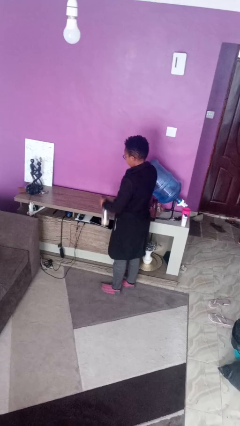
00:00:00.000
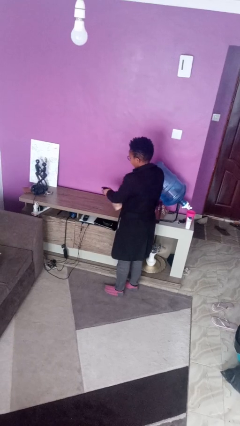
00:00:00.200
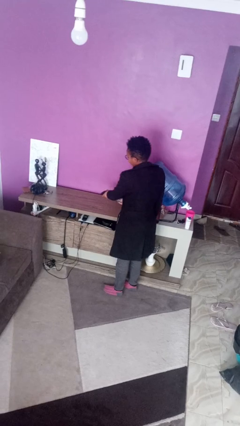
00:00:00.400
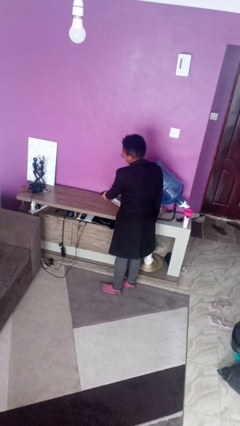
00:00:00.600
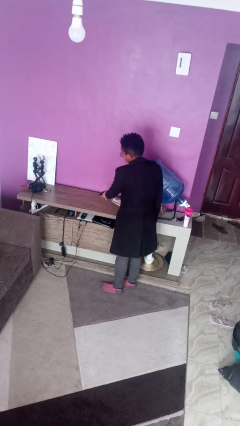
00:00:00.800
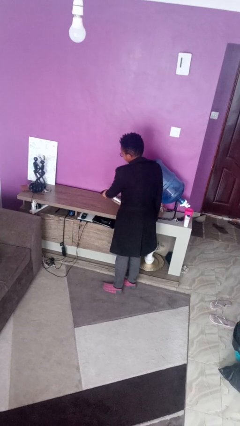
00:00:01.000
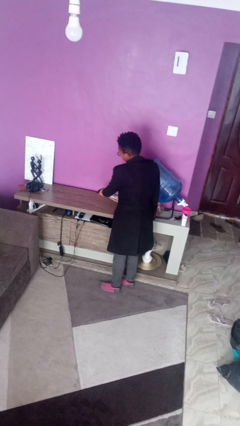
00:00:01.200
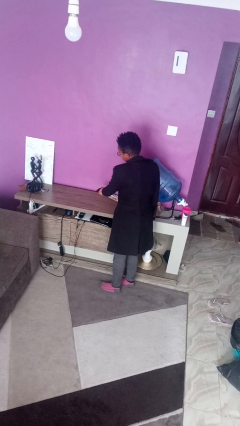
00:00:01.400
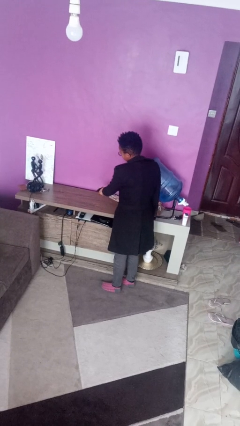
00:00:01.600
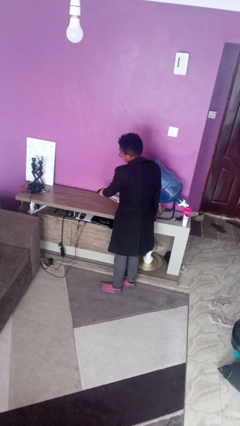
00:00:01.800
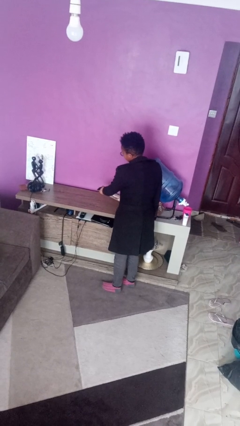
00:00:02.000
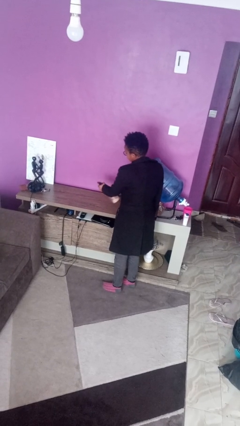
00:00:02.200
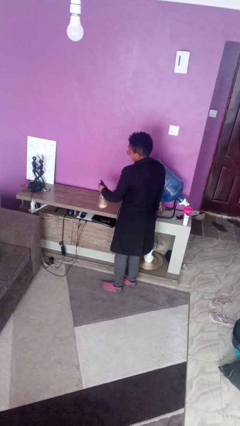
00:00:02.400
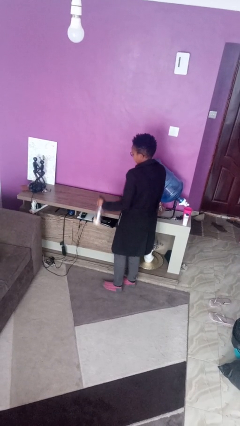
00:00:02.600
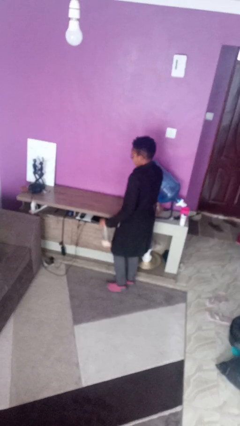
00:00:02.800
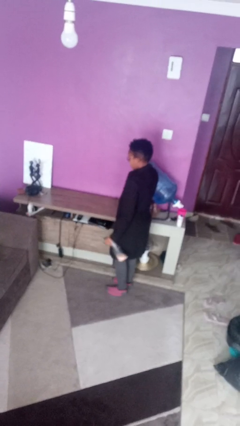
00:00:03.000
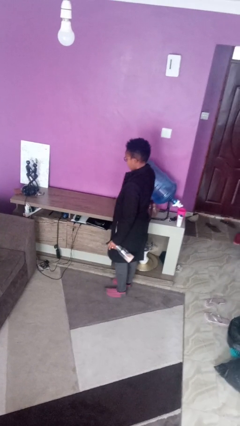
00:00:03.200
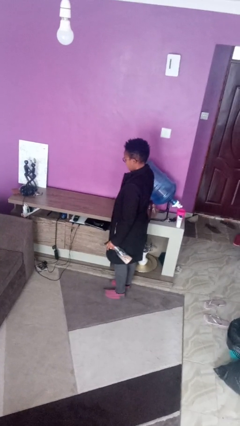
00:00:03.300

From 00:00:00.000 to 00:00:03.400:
person sprays from bottle

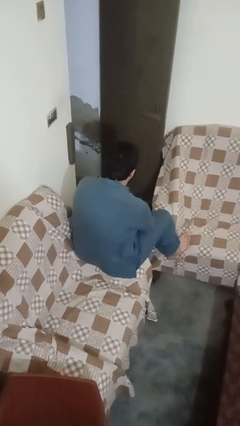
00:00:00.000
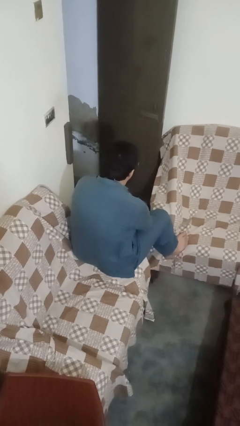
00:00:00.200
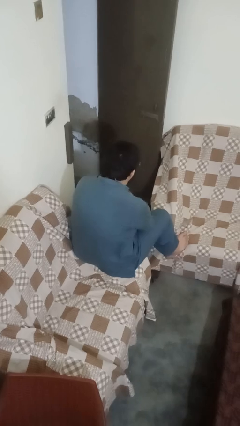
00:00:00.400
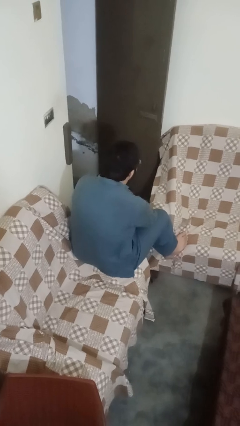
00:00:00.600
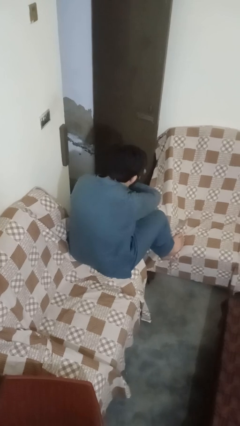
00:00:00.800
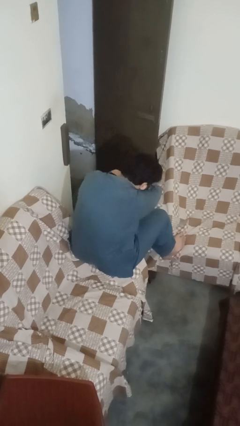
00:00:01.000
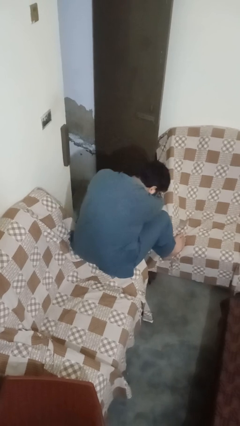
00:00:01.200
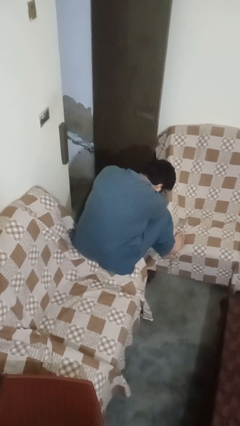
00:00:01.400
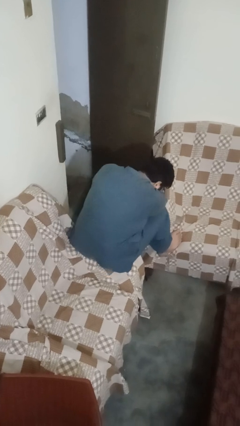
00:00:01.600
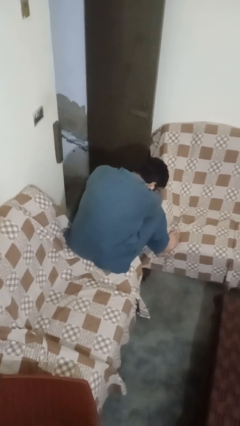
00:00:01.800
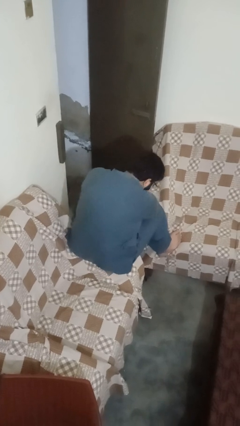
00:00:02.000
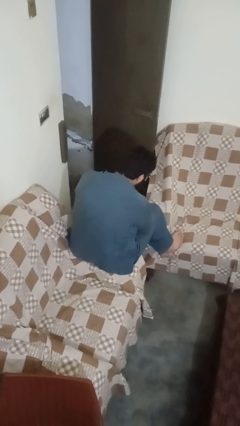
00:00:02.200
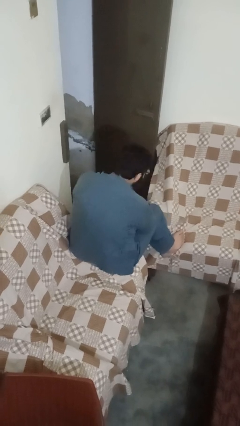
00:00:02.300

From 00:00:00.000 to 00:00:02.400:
person sneezes into arm

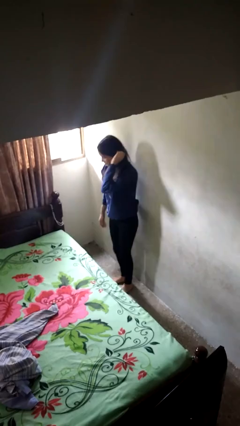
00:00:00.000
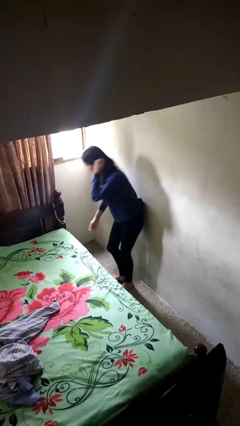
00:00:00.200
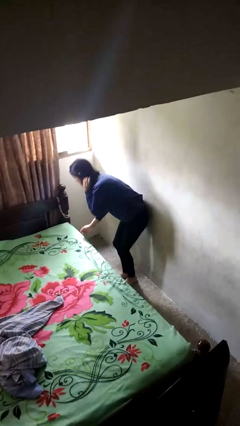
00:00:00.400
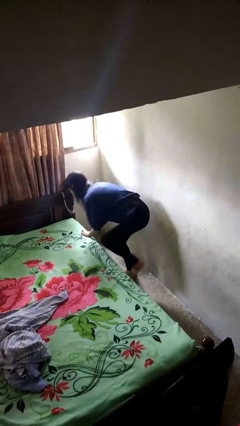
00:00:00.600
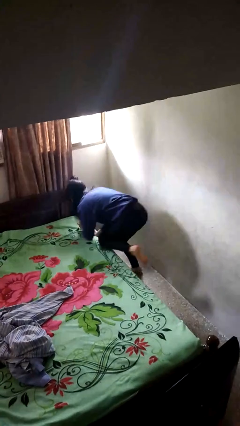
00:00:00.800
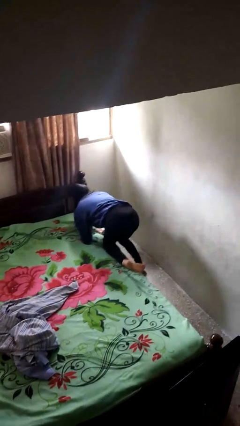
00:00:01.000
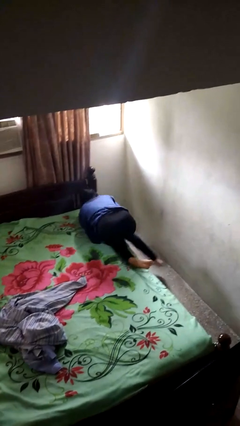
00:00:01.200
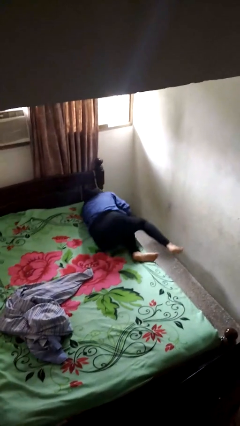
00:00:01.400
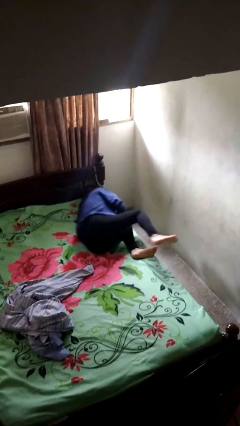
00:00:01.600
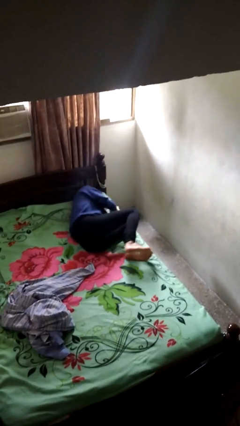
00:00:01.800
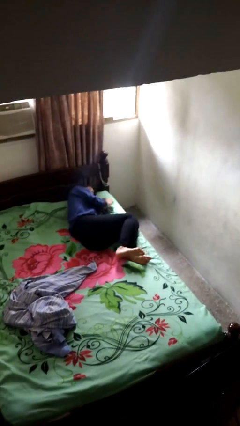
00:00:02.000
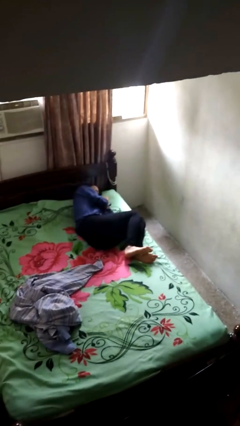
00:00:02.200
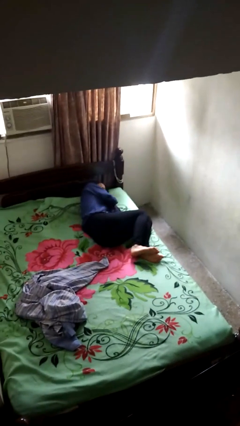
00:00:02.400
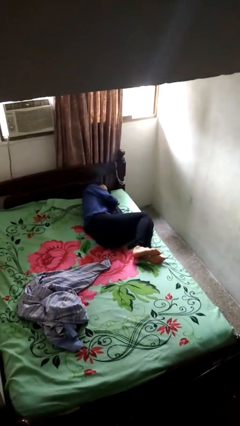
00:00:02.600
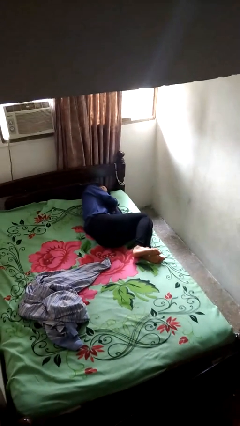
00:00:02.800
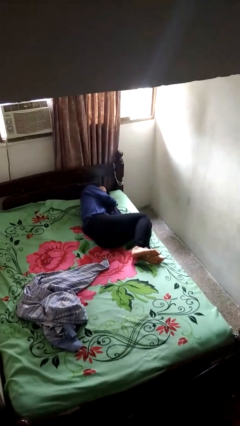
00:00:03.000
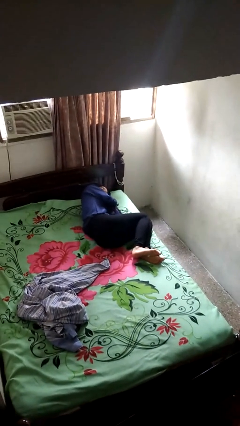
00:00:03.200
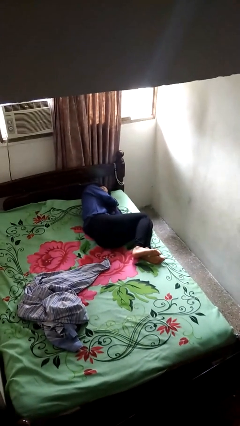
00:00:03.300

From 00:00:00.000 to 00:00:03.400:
person lies down on bed

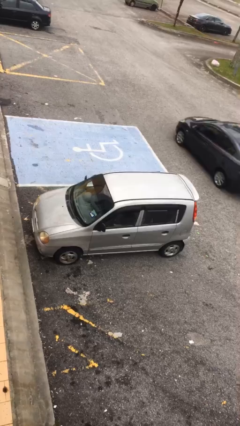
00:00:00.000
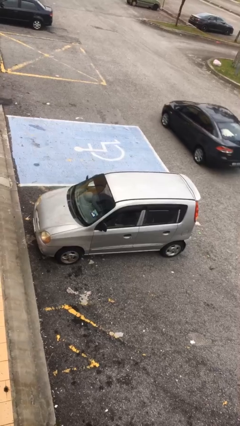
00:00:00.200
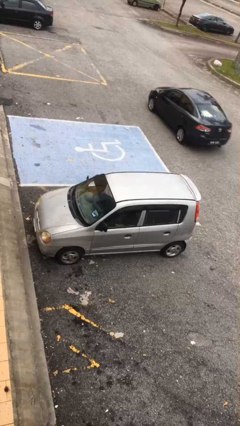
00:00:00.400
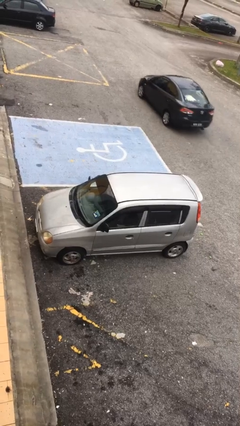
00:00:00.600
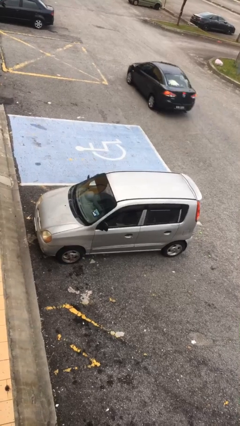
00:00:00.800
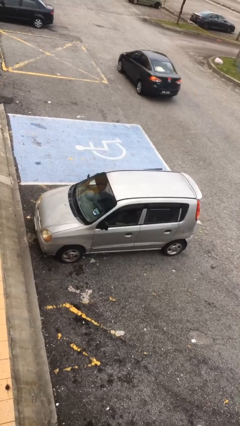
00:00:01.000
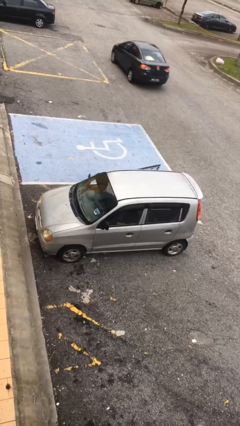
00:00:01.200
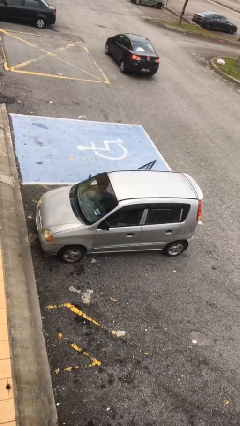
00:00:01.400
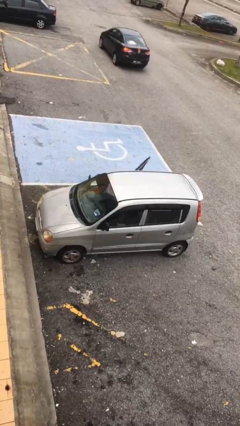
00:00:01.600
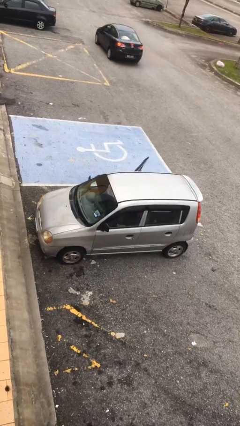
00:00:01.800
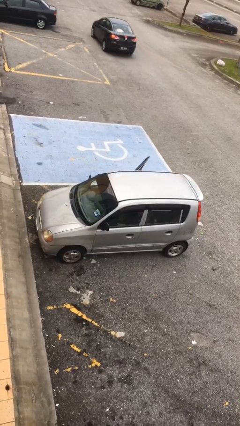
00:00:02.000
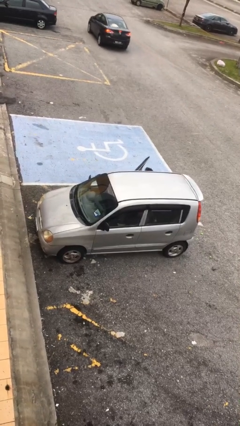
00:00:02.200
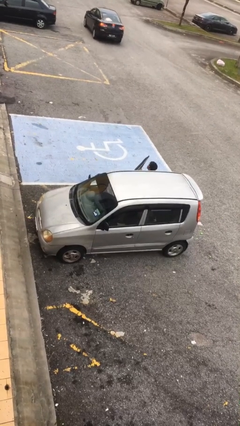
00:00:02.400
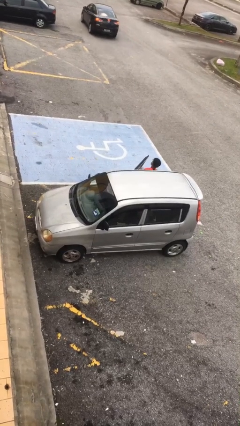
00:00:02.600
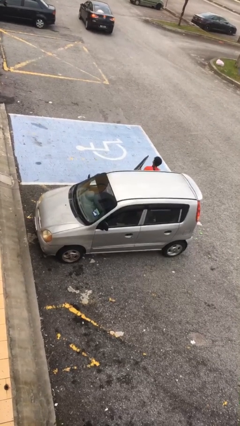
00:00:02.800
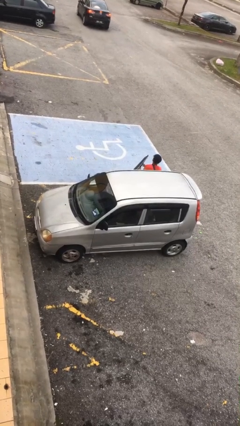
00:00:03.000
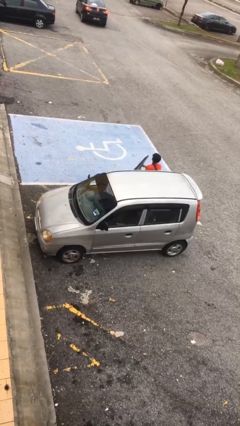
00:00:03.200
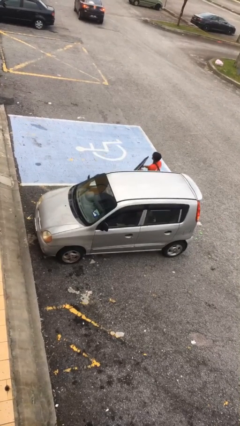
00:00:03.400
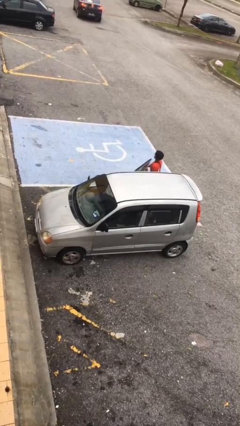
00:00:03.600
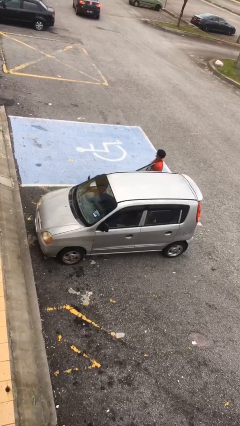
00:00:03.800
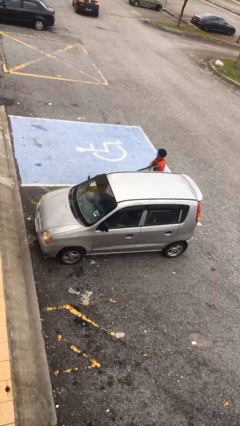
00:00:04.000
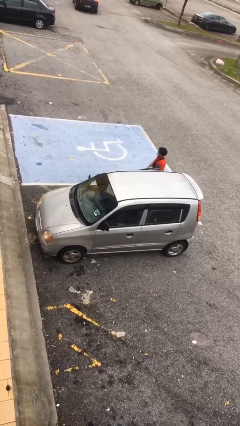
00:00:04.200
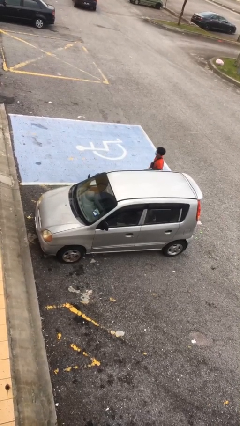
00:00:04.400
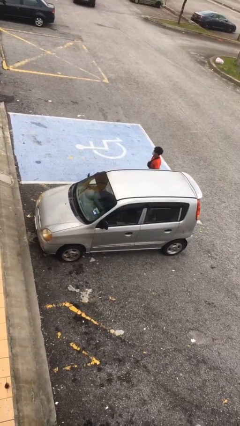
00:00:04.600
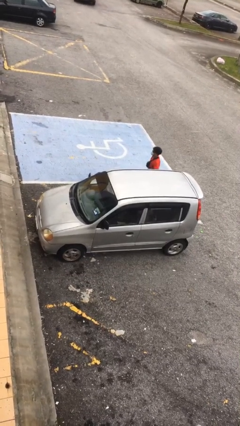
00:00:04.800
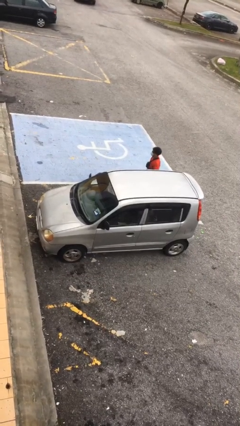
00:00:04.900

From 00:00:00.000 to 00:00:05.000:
car drops off person

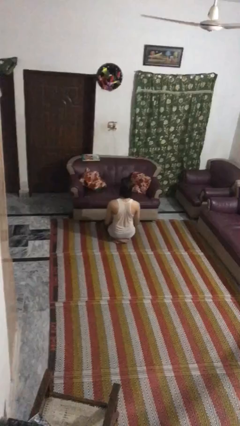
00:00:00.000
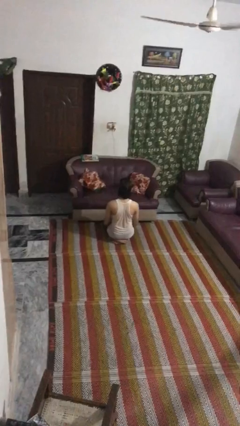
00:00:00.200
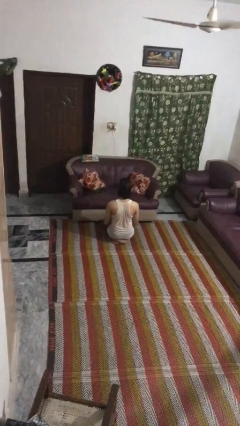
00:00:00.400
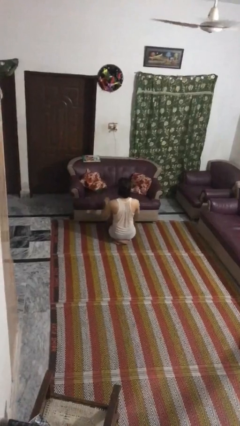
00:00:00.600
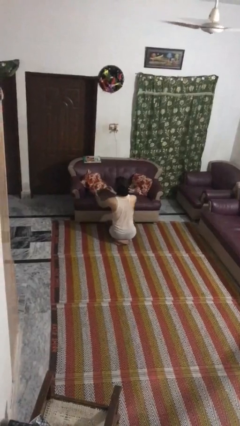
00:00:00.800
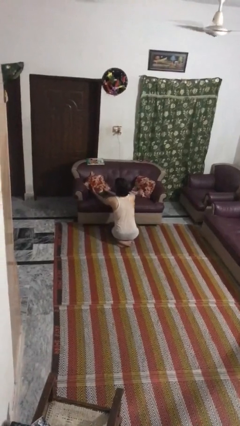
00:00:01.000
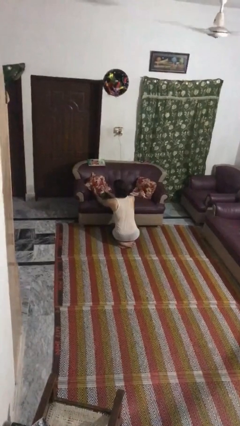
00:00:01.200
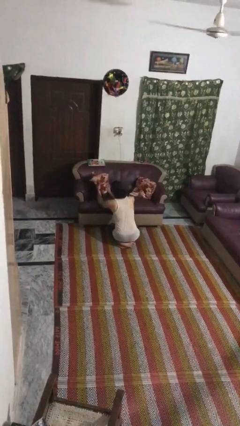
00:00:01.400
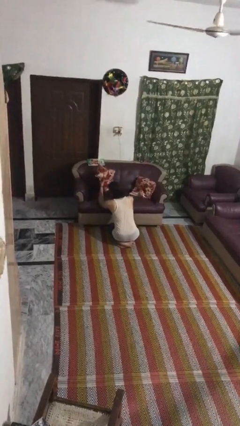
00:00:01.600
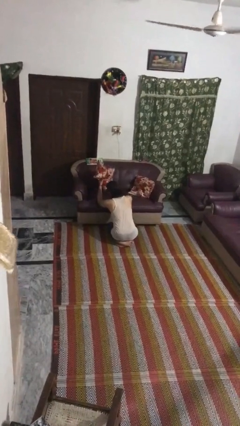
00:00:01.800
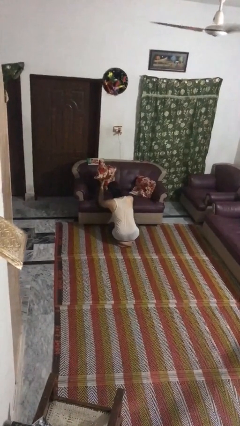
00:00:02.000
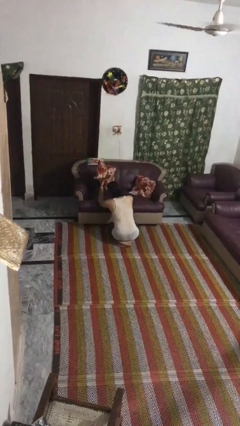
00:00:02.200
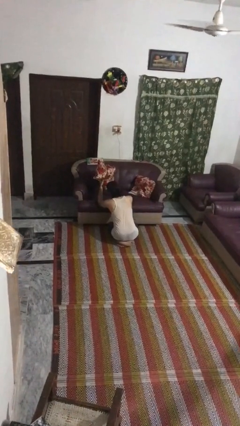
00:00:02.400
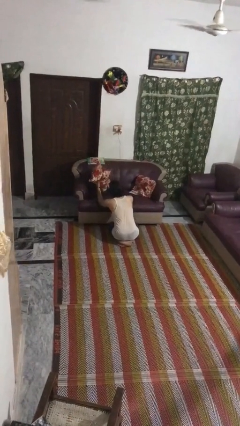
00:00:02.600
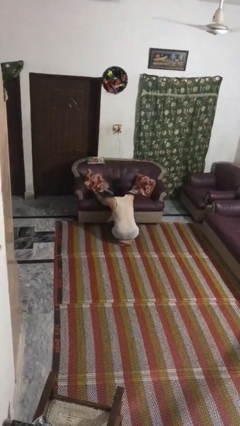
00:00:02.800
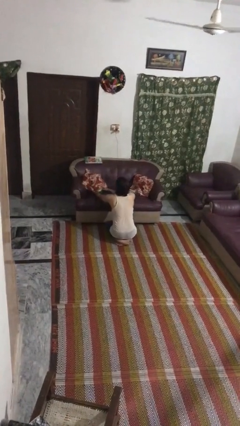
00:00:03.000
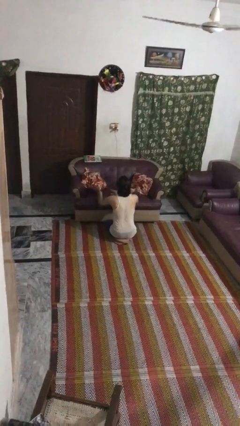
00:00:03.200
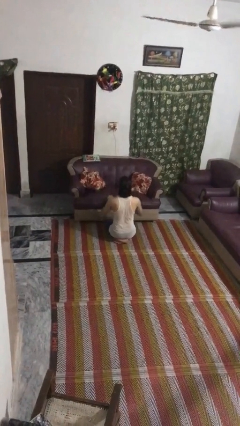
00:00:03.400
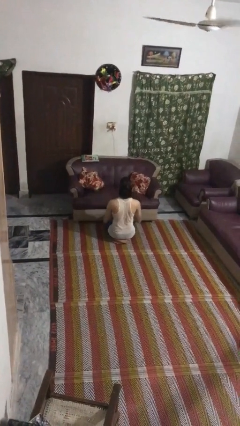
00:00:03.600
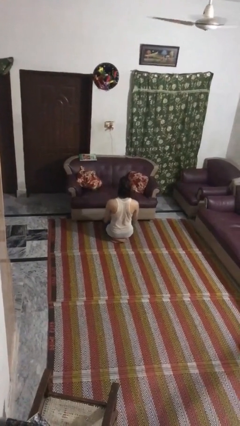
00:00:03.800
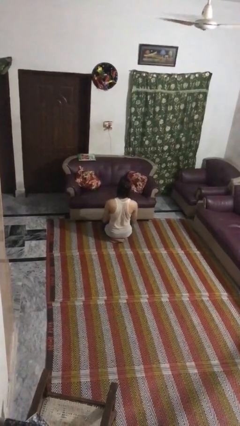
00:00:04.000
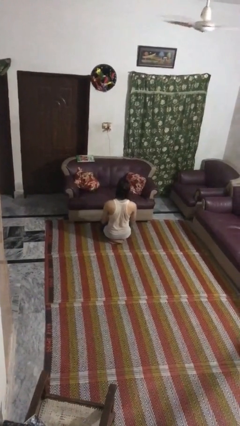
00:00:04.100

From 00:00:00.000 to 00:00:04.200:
person searches in couch
